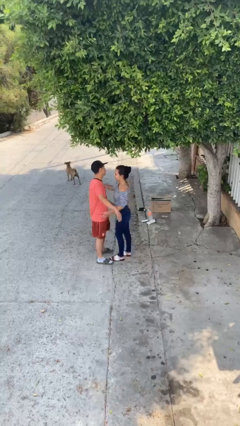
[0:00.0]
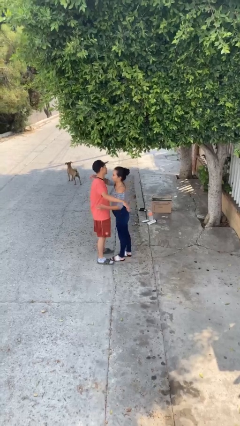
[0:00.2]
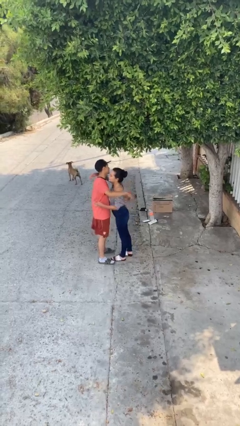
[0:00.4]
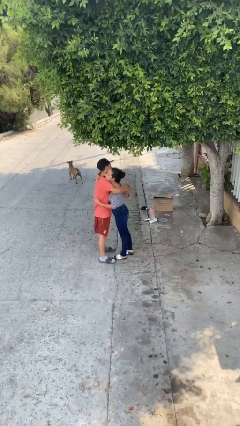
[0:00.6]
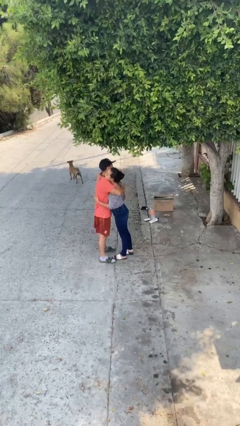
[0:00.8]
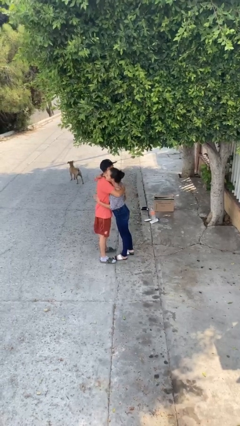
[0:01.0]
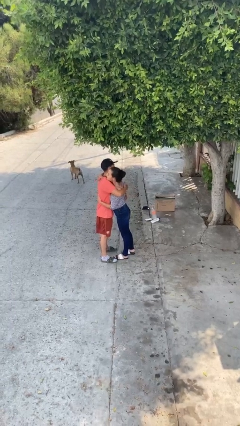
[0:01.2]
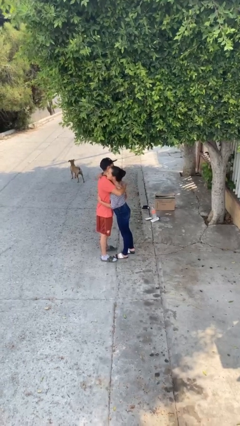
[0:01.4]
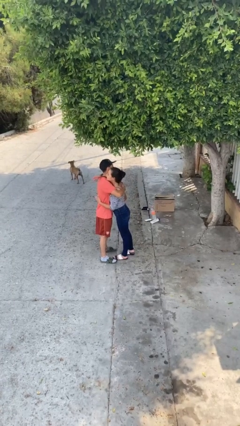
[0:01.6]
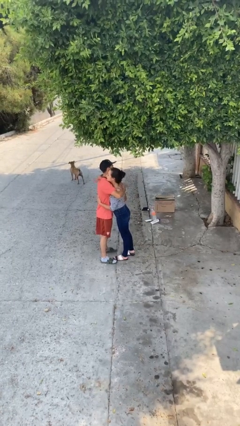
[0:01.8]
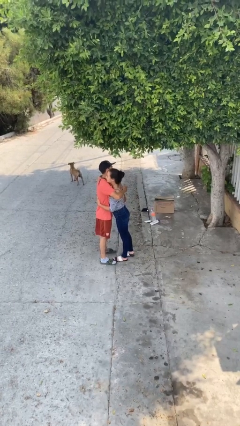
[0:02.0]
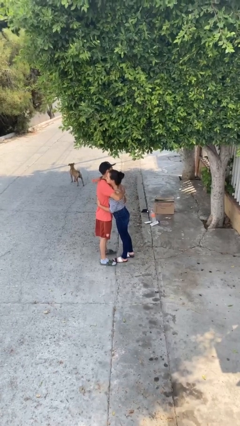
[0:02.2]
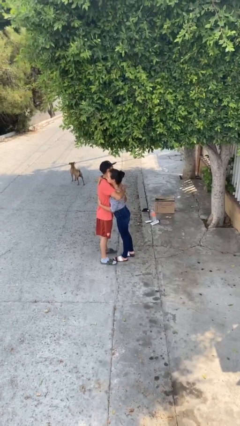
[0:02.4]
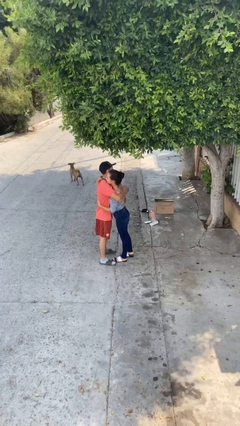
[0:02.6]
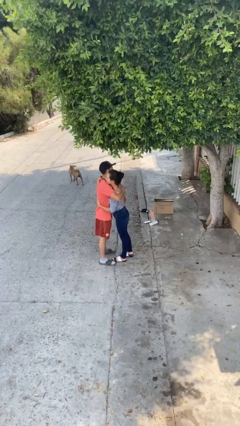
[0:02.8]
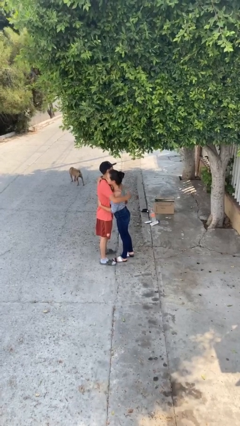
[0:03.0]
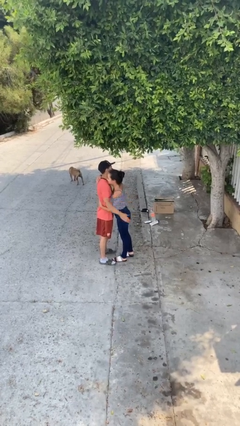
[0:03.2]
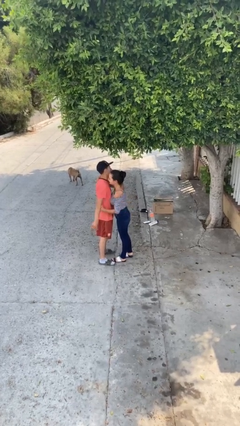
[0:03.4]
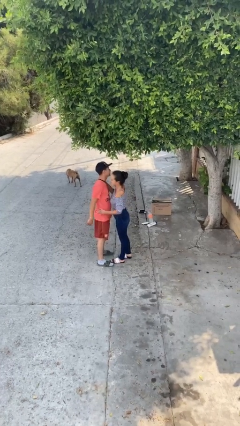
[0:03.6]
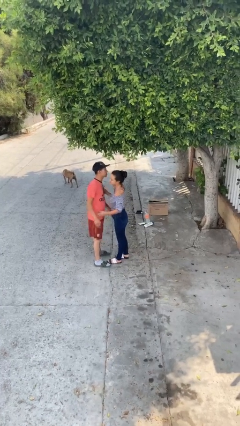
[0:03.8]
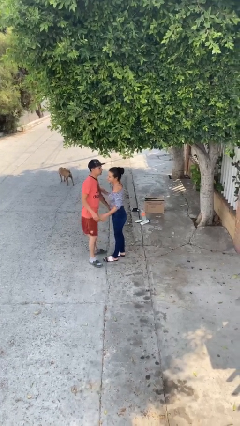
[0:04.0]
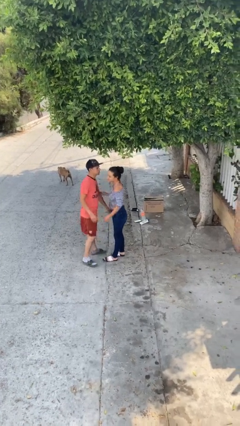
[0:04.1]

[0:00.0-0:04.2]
person embraces person

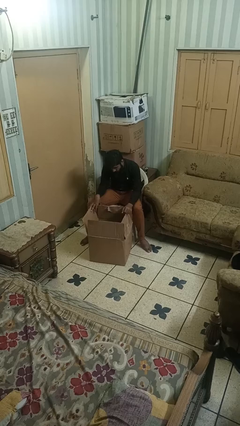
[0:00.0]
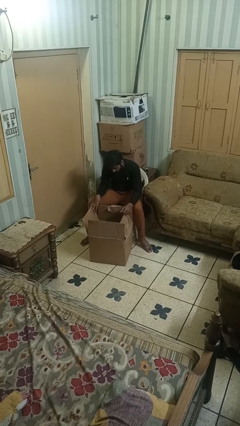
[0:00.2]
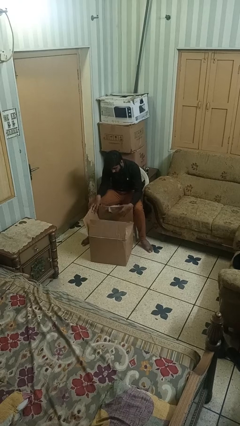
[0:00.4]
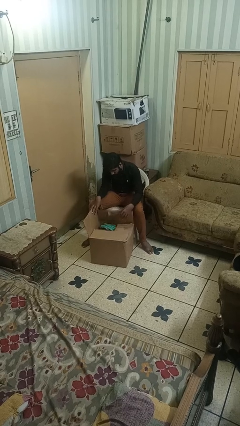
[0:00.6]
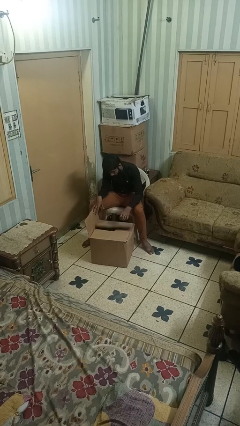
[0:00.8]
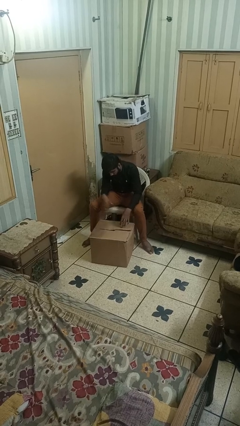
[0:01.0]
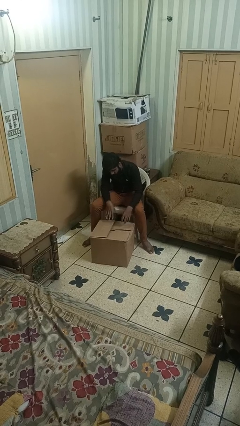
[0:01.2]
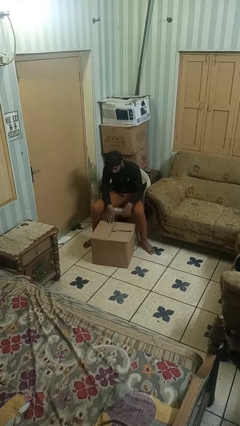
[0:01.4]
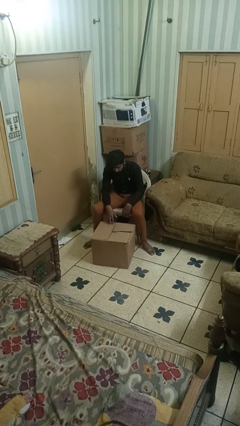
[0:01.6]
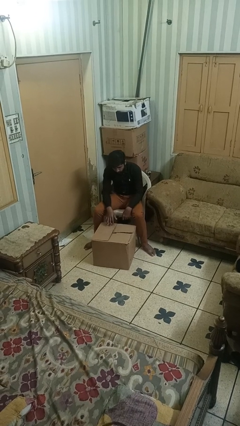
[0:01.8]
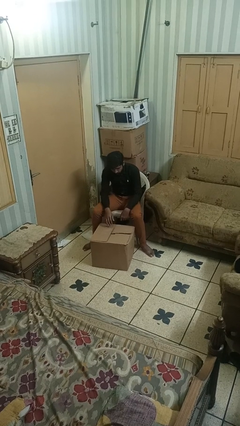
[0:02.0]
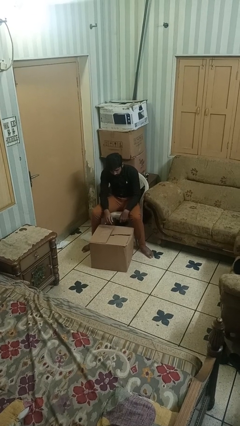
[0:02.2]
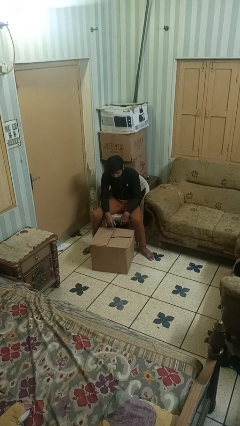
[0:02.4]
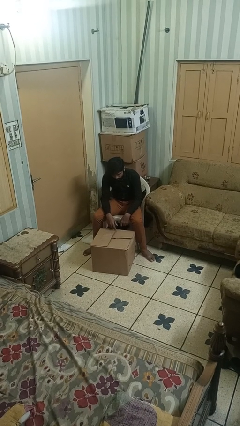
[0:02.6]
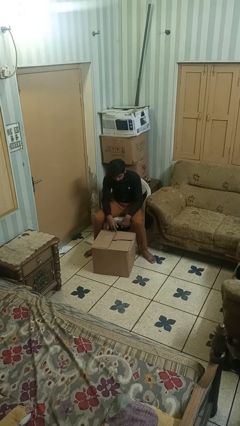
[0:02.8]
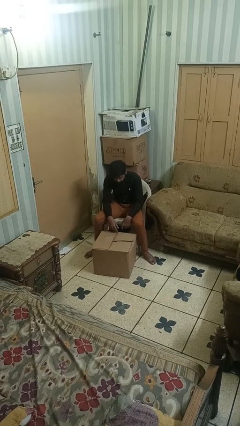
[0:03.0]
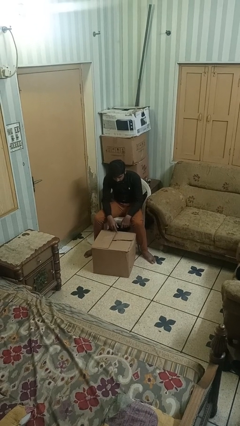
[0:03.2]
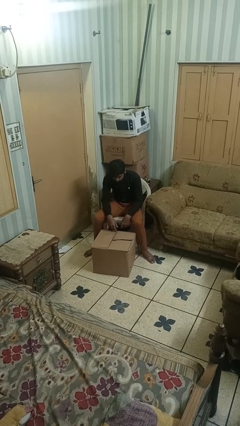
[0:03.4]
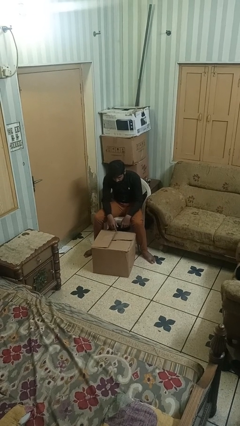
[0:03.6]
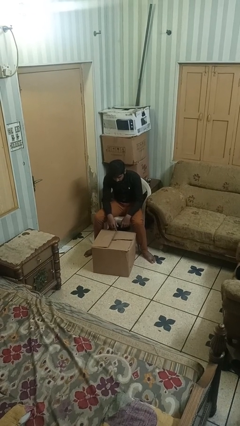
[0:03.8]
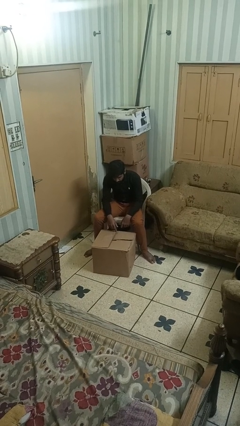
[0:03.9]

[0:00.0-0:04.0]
person closes box

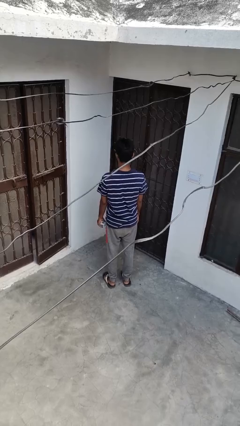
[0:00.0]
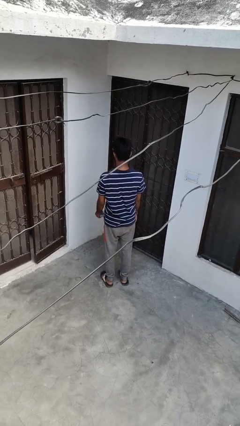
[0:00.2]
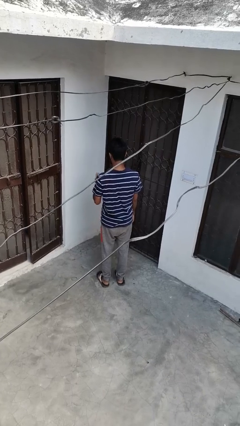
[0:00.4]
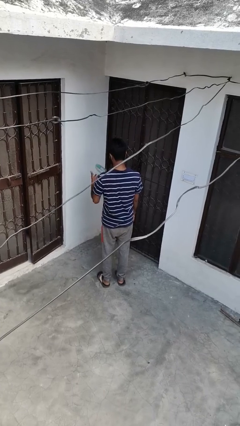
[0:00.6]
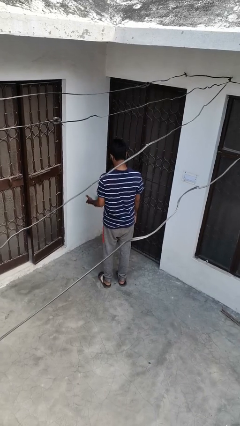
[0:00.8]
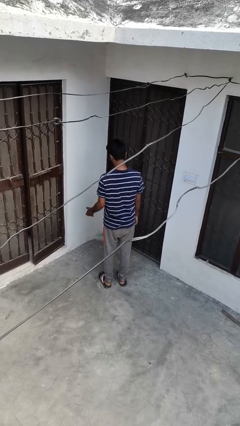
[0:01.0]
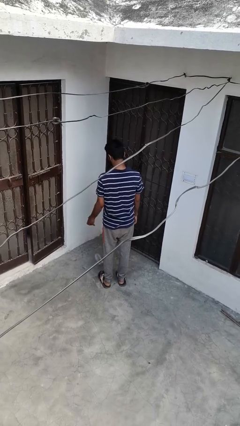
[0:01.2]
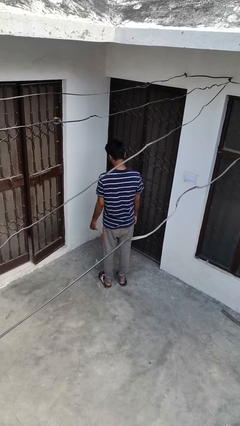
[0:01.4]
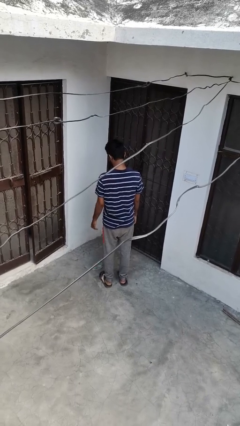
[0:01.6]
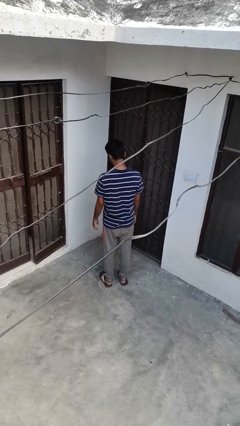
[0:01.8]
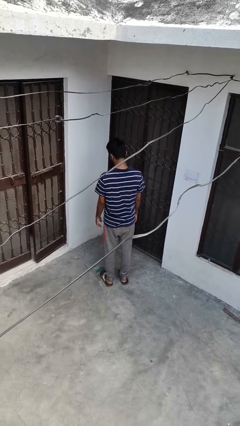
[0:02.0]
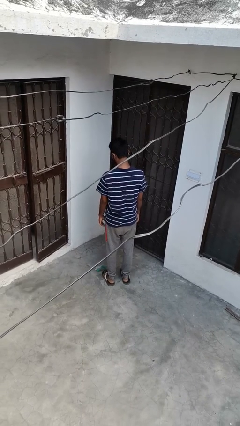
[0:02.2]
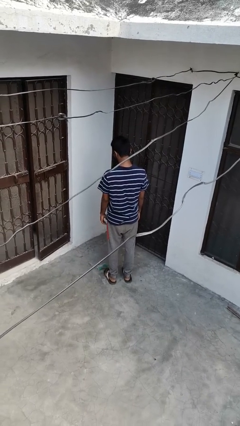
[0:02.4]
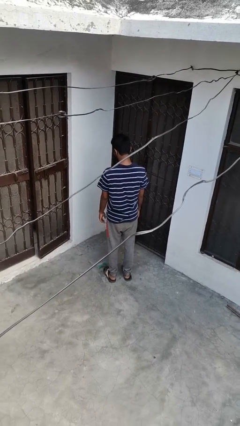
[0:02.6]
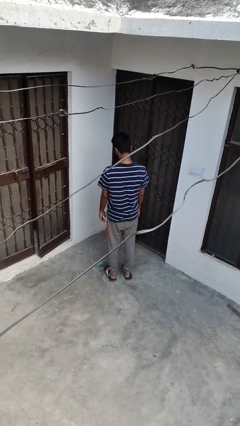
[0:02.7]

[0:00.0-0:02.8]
person throws object into air

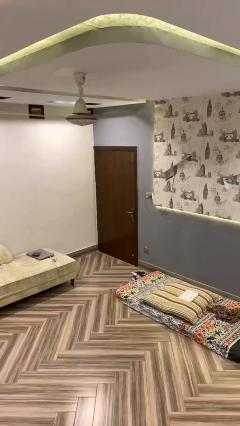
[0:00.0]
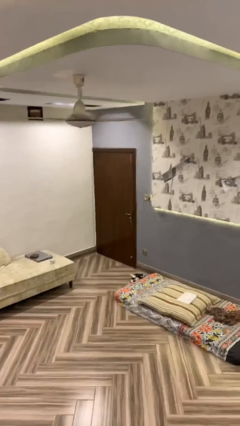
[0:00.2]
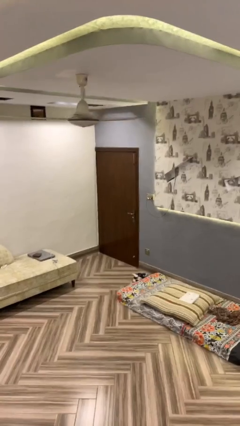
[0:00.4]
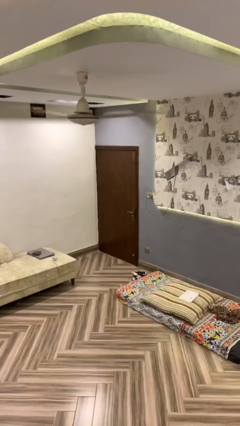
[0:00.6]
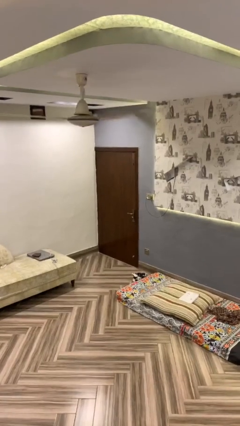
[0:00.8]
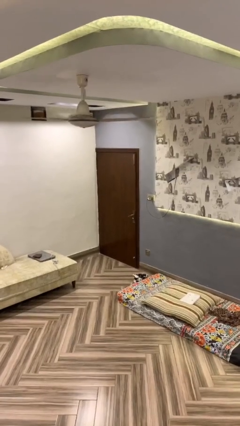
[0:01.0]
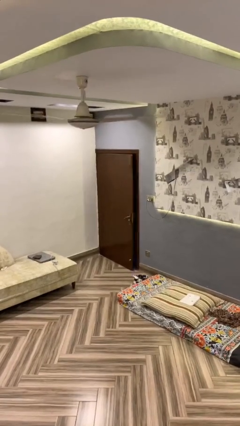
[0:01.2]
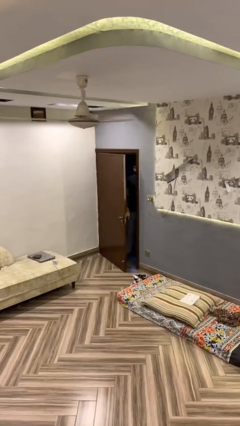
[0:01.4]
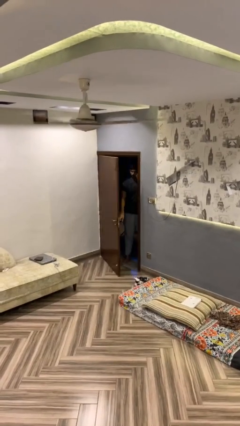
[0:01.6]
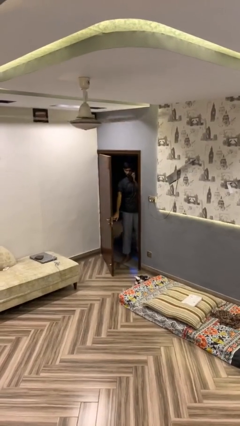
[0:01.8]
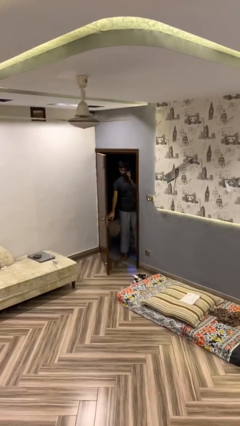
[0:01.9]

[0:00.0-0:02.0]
person opens facility door

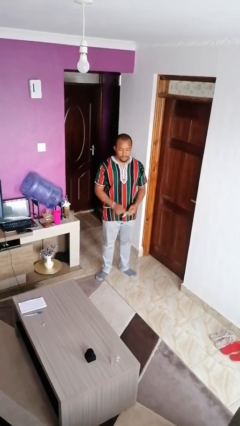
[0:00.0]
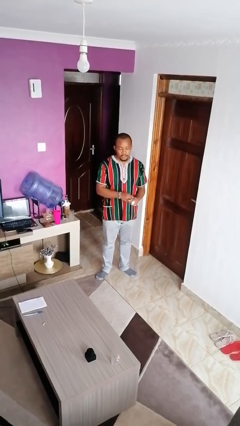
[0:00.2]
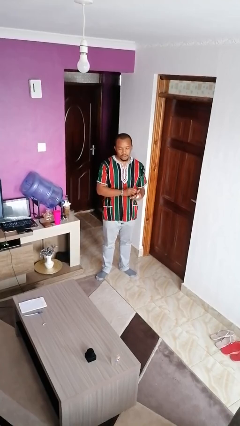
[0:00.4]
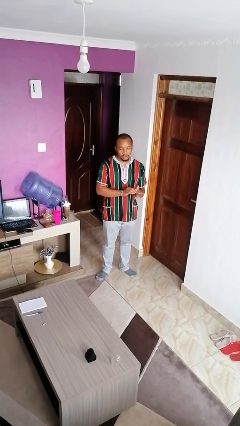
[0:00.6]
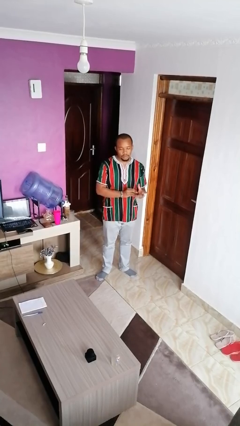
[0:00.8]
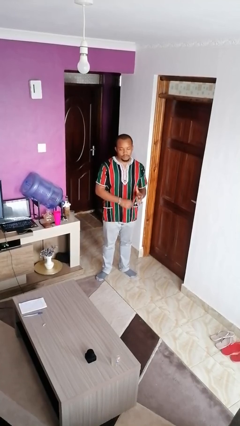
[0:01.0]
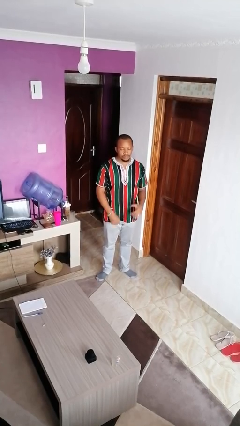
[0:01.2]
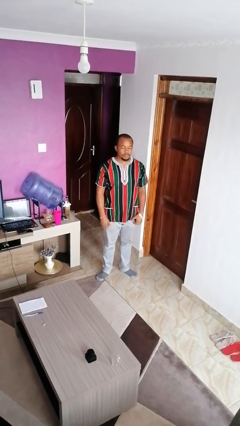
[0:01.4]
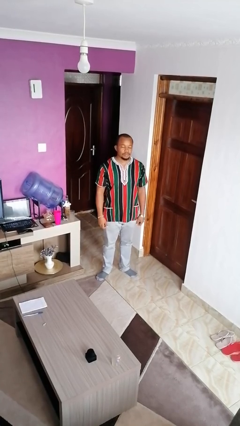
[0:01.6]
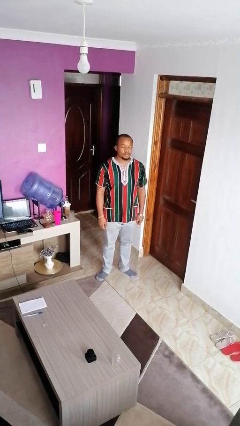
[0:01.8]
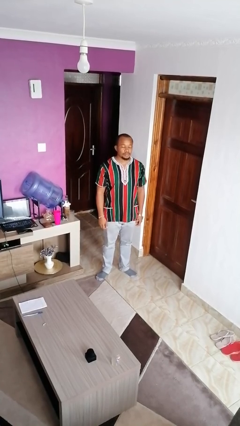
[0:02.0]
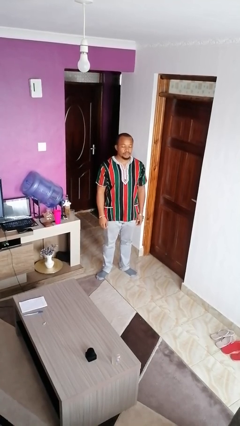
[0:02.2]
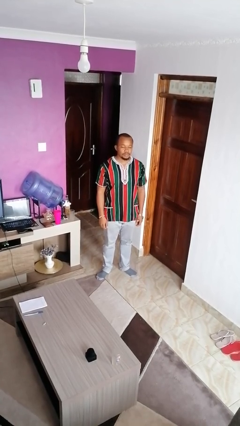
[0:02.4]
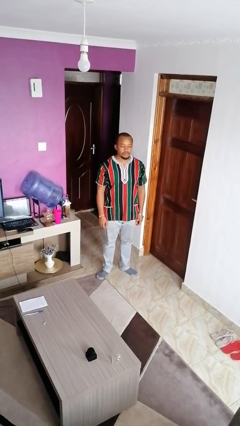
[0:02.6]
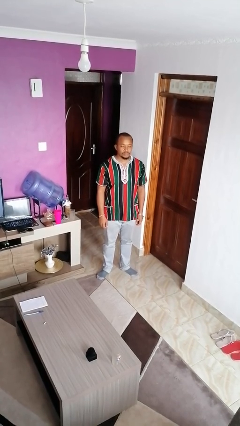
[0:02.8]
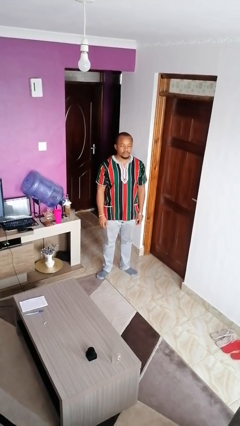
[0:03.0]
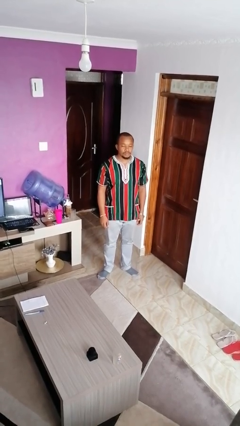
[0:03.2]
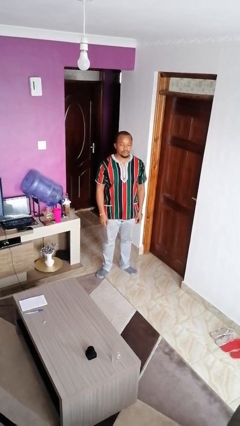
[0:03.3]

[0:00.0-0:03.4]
person puts on wristwatch

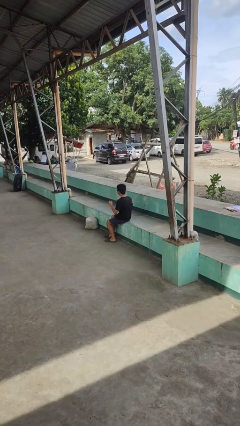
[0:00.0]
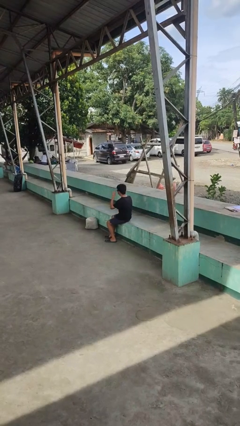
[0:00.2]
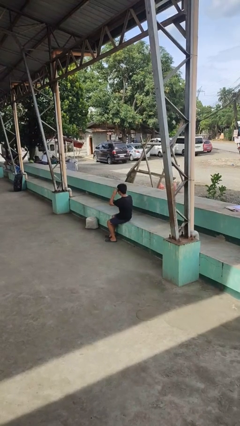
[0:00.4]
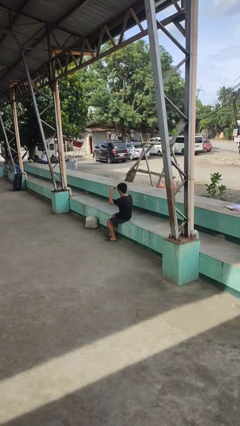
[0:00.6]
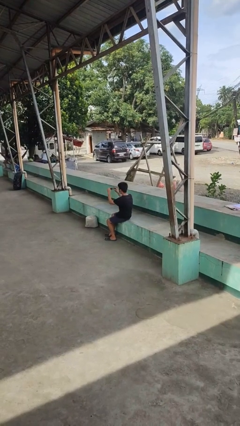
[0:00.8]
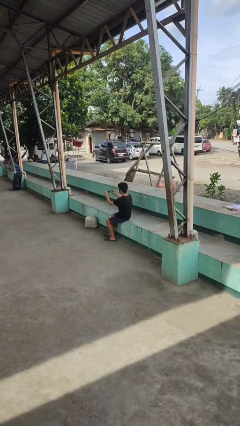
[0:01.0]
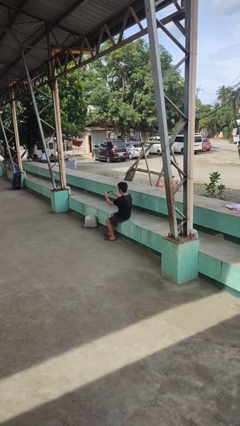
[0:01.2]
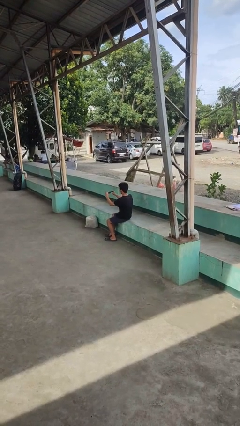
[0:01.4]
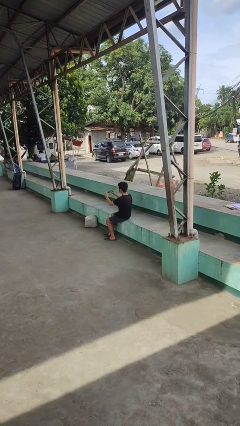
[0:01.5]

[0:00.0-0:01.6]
person takes off sunglasses
